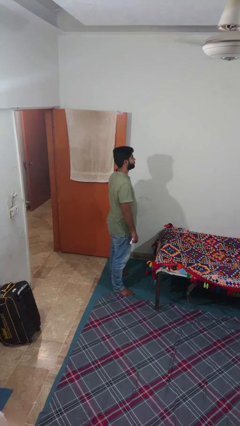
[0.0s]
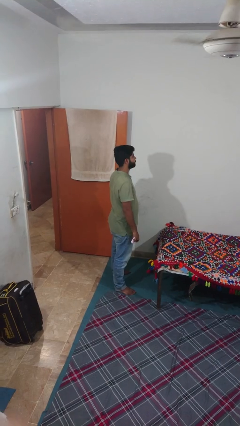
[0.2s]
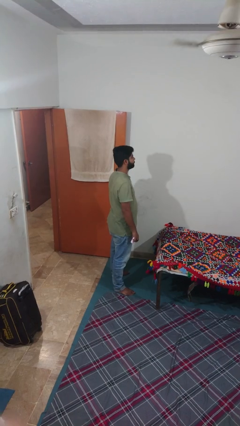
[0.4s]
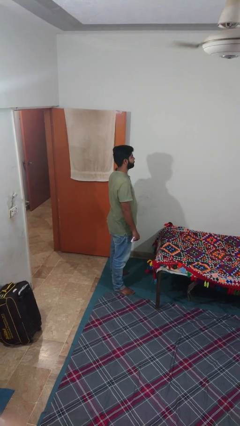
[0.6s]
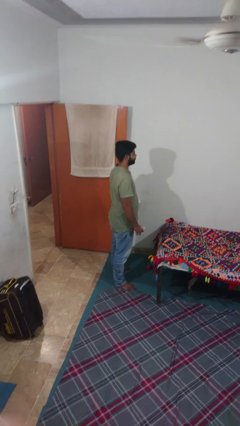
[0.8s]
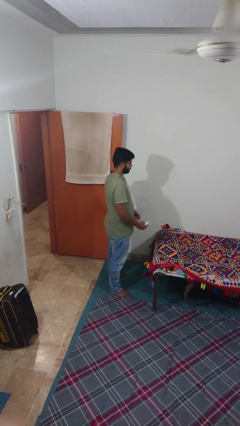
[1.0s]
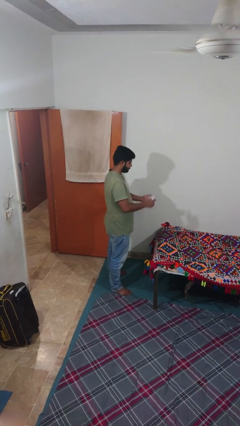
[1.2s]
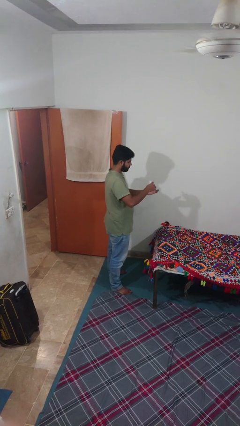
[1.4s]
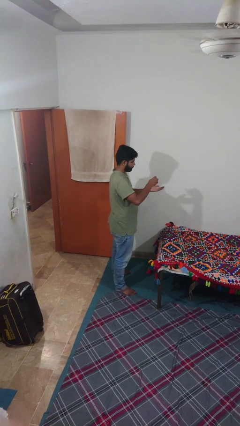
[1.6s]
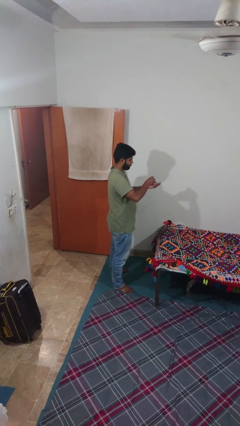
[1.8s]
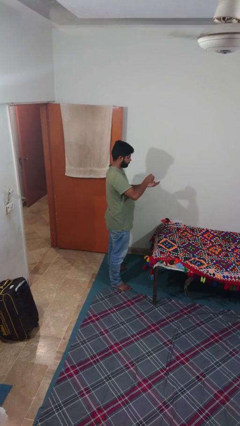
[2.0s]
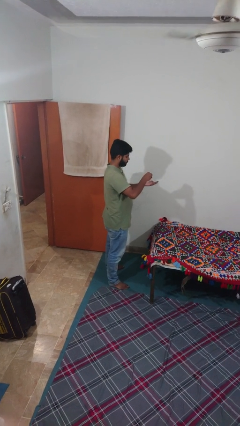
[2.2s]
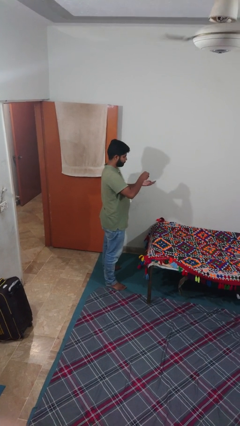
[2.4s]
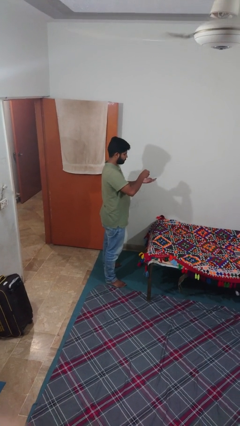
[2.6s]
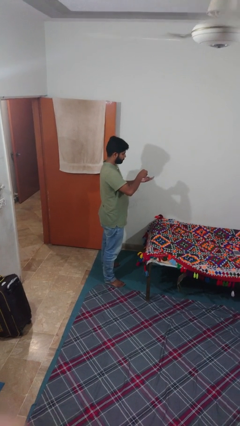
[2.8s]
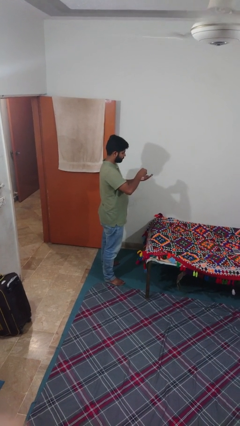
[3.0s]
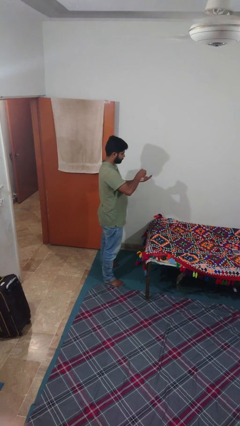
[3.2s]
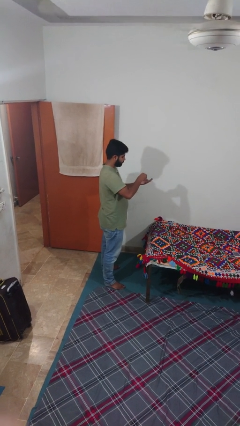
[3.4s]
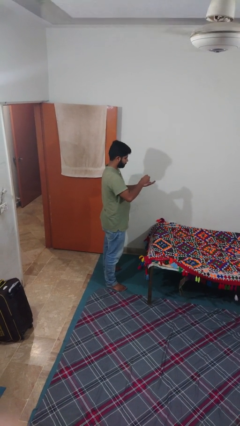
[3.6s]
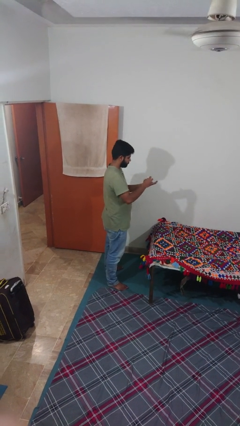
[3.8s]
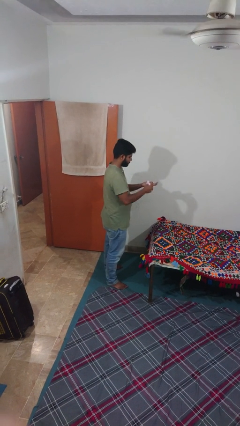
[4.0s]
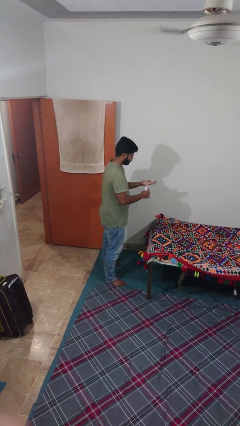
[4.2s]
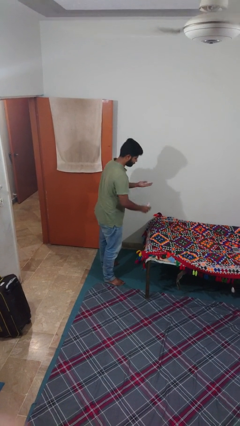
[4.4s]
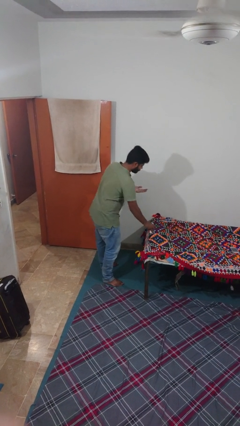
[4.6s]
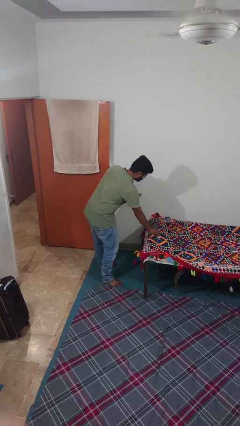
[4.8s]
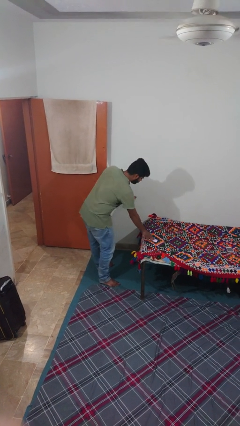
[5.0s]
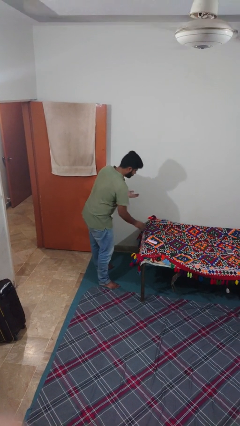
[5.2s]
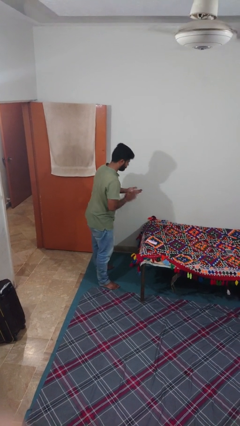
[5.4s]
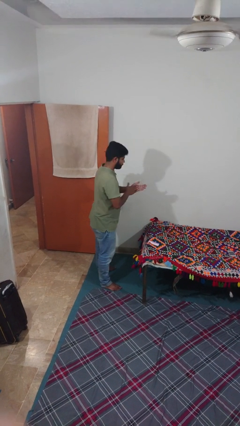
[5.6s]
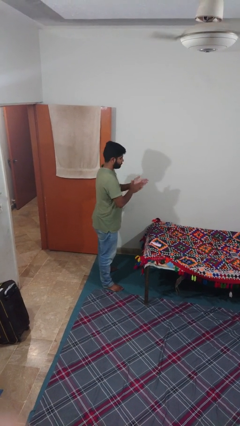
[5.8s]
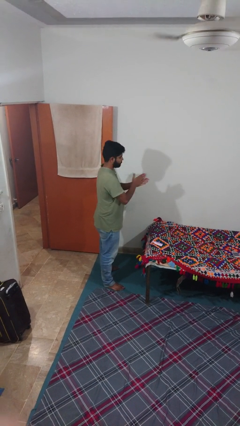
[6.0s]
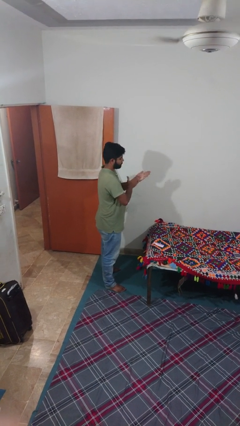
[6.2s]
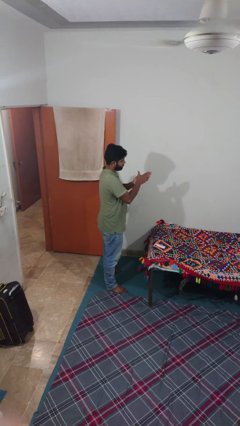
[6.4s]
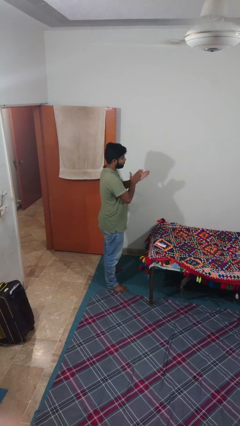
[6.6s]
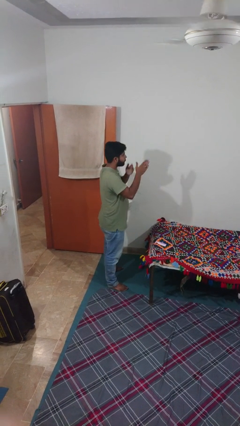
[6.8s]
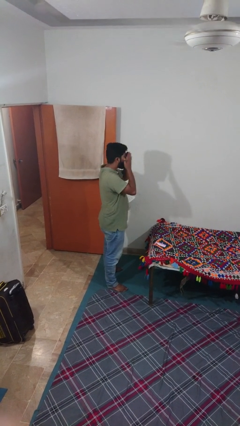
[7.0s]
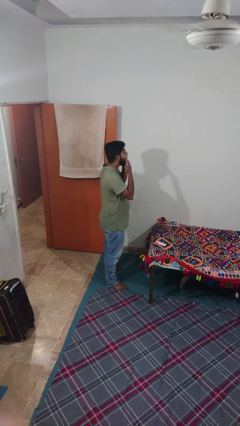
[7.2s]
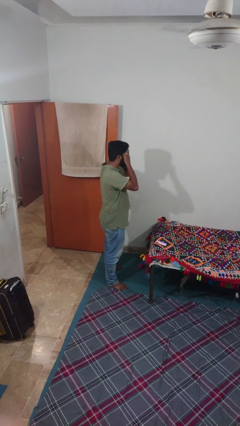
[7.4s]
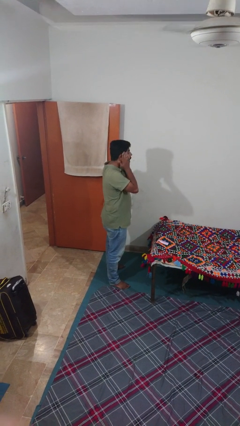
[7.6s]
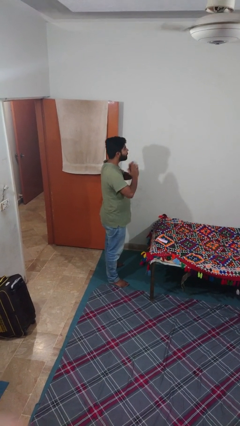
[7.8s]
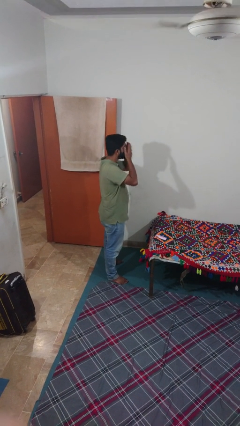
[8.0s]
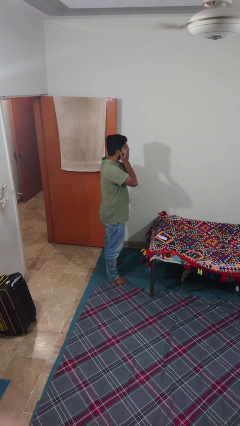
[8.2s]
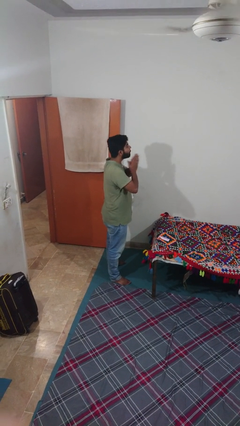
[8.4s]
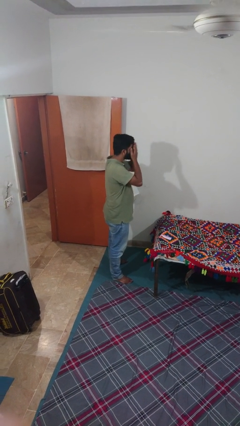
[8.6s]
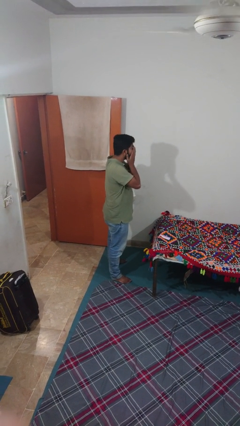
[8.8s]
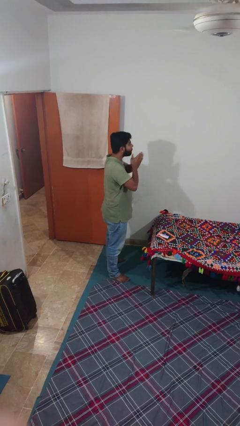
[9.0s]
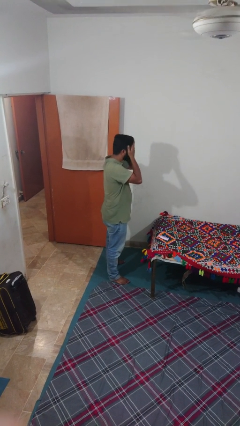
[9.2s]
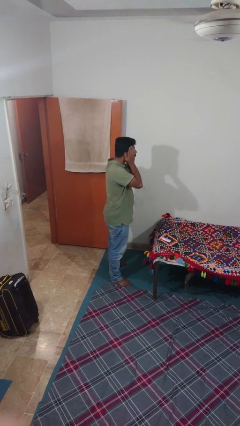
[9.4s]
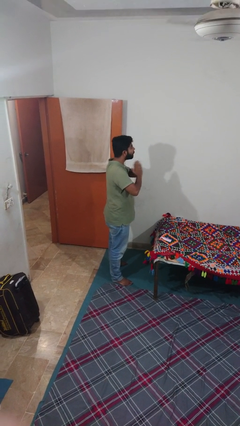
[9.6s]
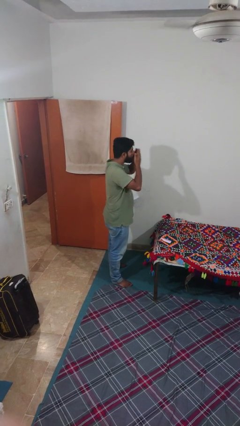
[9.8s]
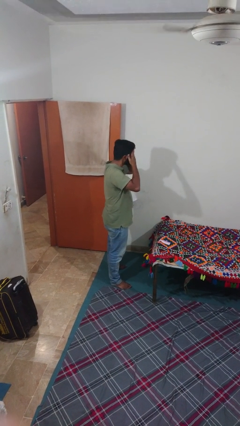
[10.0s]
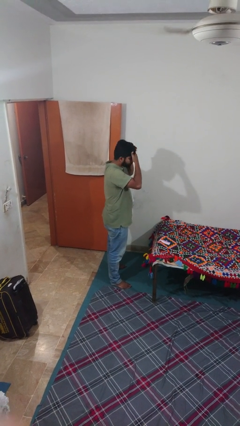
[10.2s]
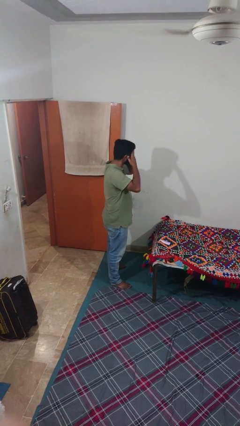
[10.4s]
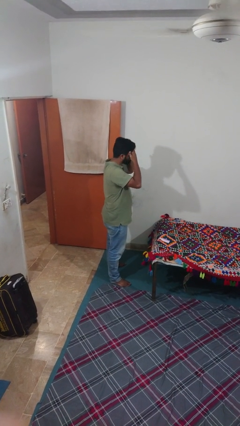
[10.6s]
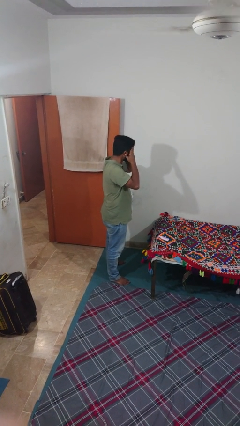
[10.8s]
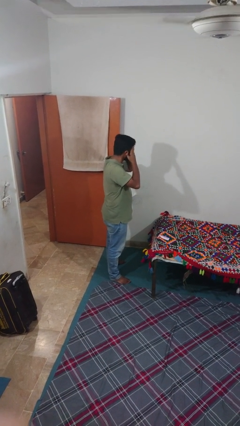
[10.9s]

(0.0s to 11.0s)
person applies facial moisturizer

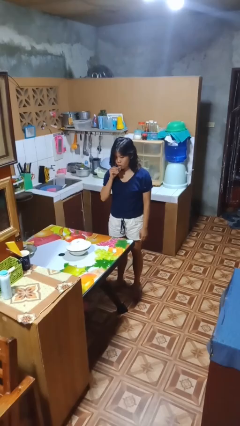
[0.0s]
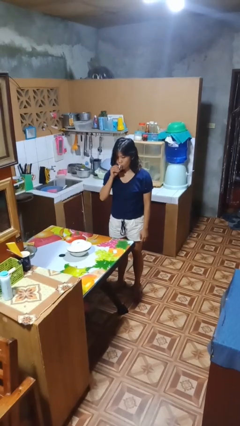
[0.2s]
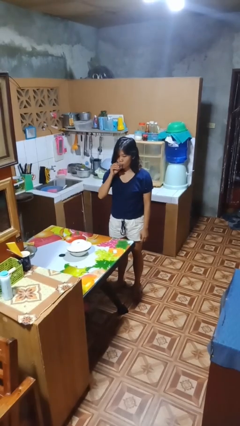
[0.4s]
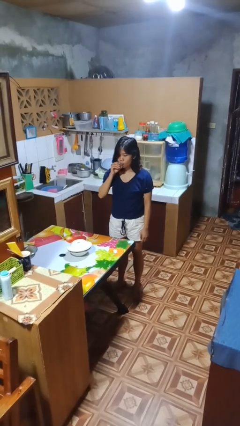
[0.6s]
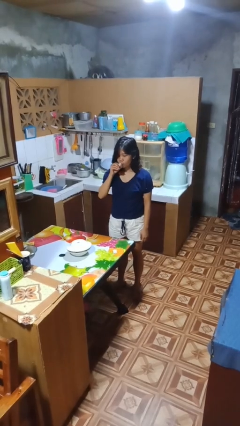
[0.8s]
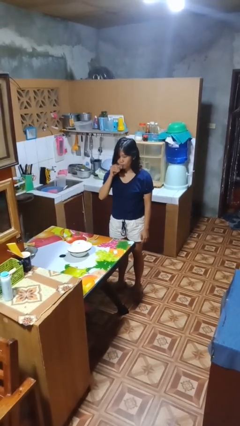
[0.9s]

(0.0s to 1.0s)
person drinks from shotglass

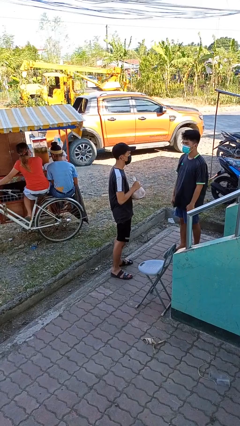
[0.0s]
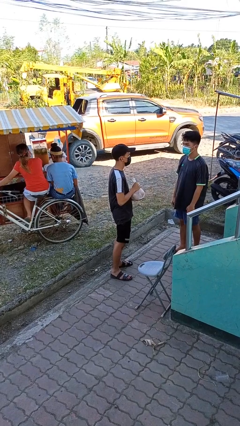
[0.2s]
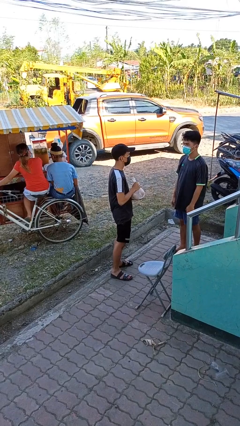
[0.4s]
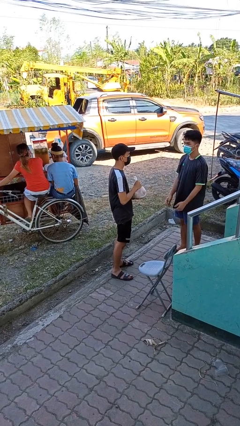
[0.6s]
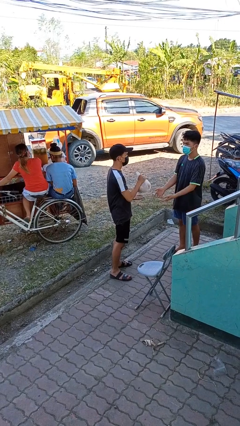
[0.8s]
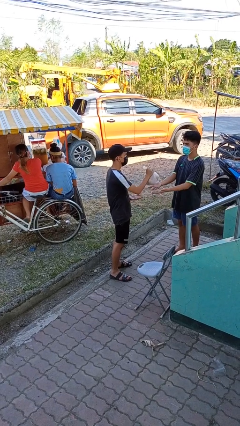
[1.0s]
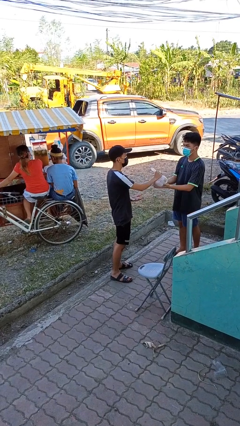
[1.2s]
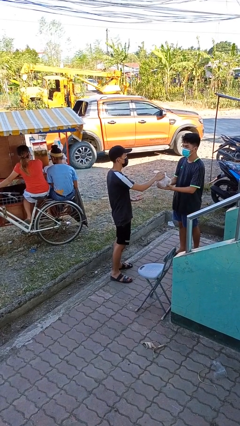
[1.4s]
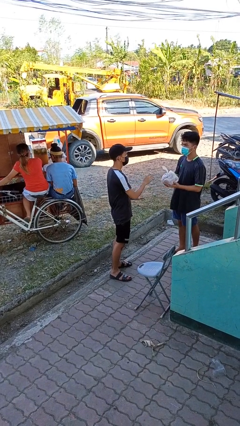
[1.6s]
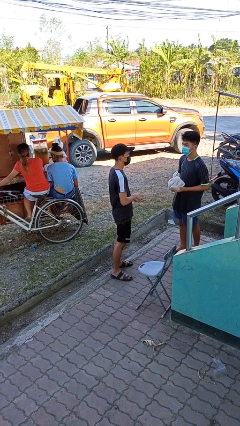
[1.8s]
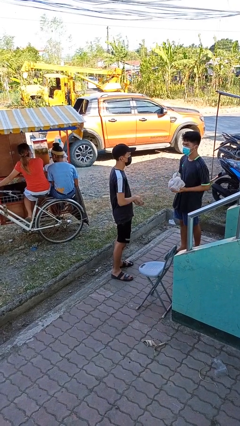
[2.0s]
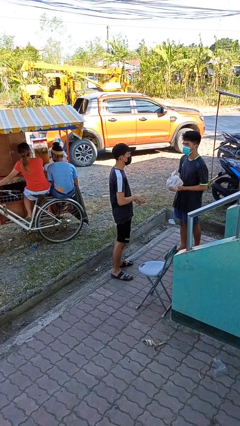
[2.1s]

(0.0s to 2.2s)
person transfers object to person

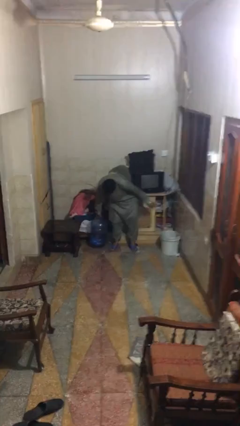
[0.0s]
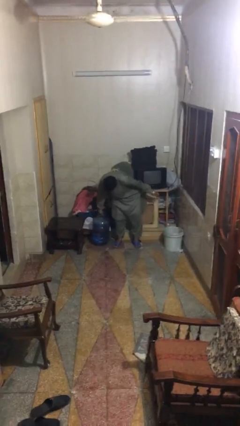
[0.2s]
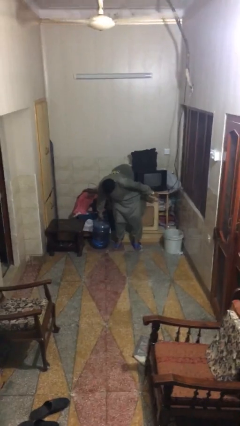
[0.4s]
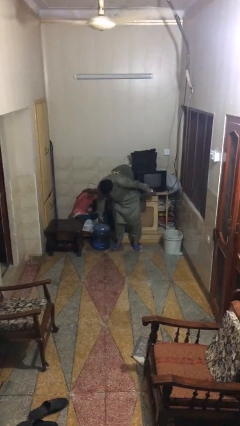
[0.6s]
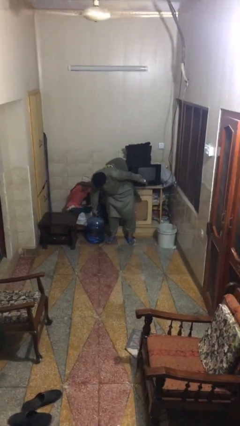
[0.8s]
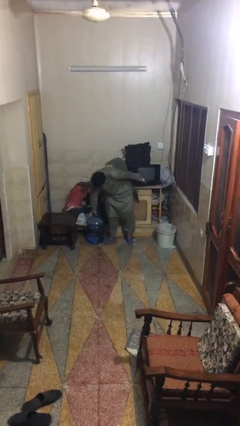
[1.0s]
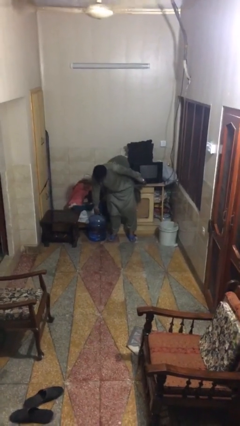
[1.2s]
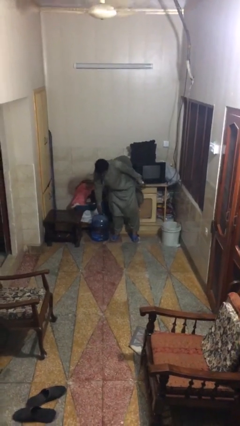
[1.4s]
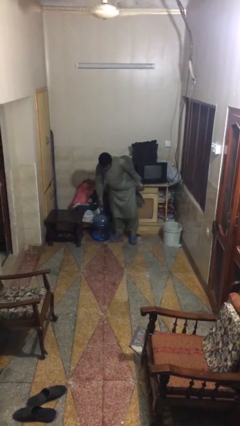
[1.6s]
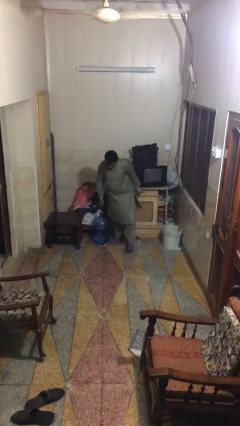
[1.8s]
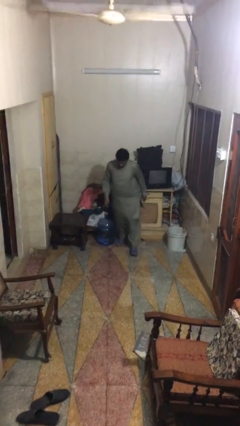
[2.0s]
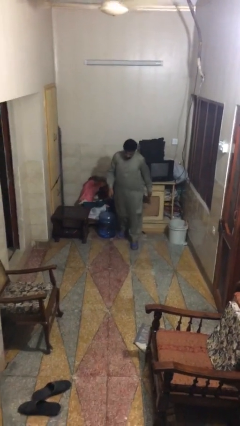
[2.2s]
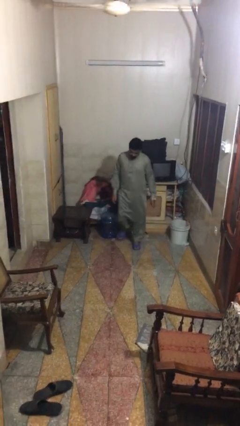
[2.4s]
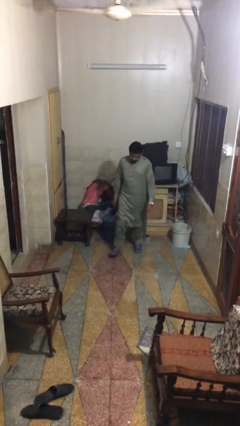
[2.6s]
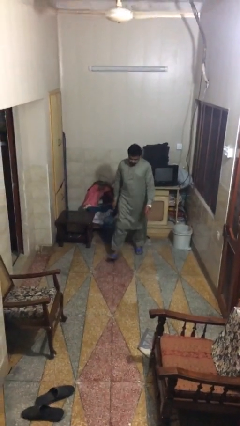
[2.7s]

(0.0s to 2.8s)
person puts down object on floor

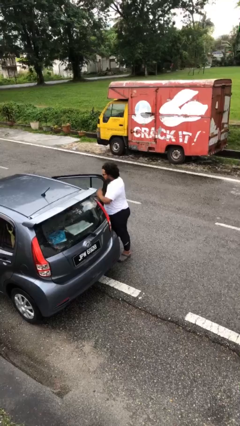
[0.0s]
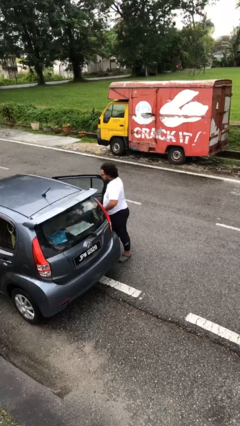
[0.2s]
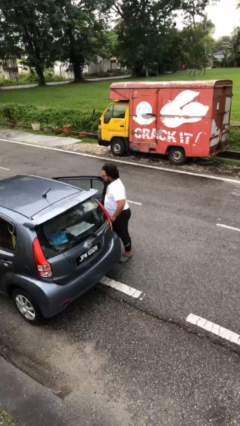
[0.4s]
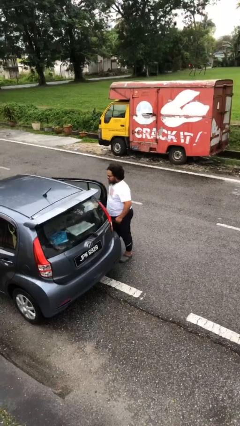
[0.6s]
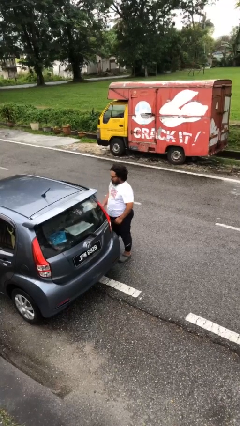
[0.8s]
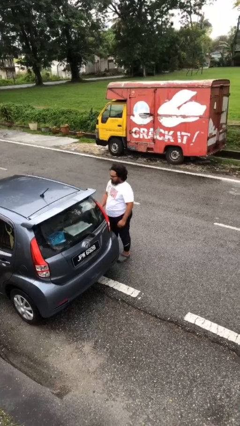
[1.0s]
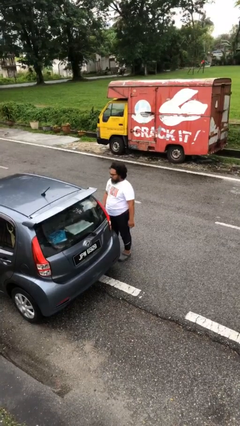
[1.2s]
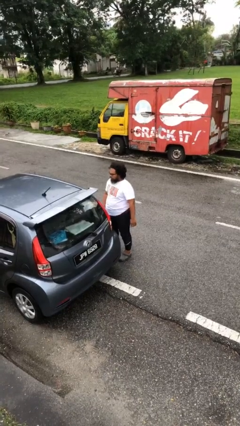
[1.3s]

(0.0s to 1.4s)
person closes car door
